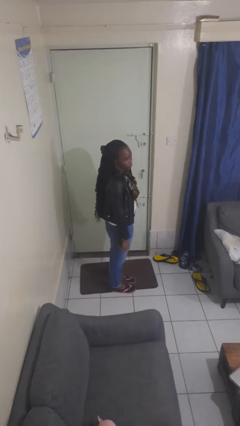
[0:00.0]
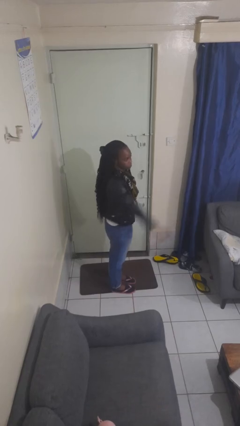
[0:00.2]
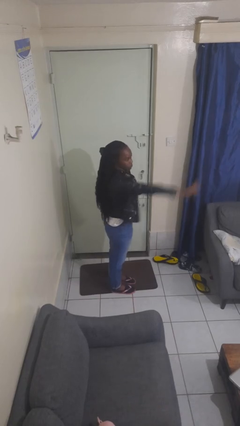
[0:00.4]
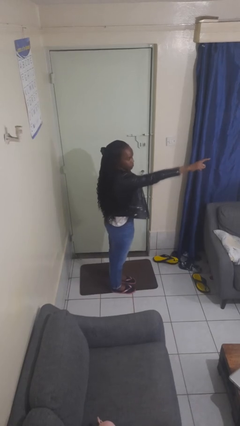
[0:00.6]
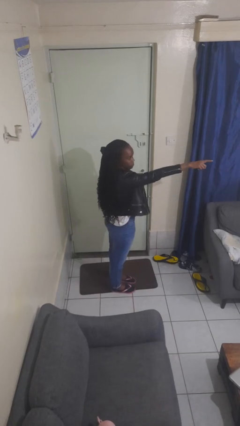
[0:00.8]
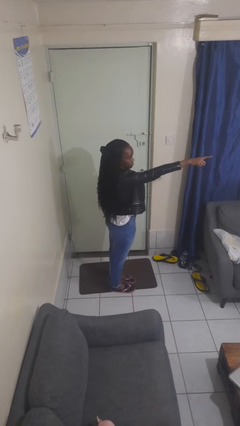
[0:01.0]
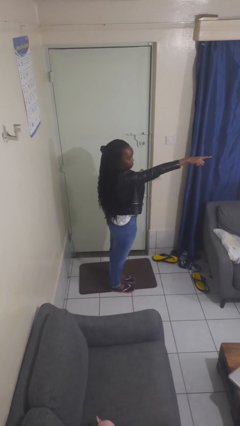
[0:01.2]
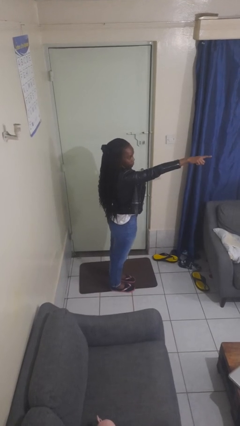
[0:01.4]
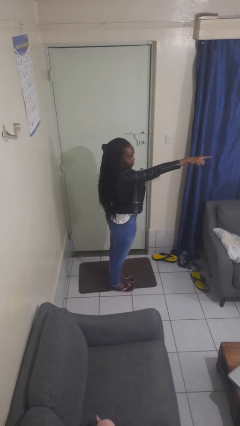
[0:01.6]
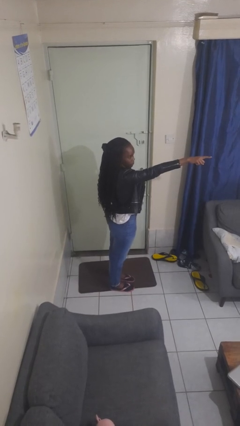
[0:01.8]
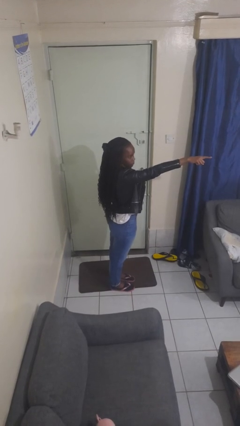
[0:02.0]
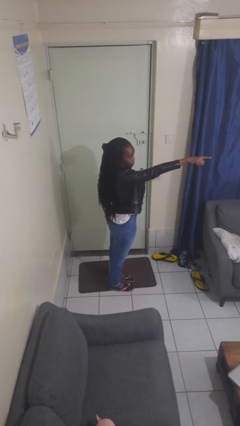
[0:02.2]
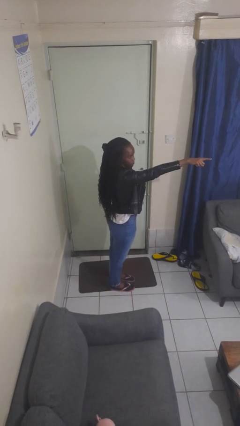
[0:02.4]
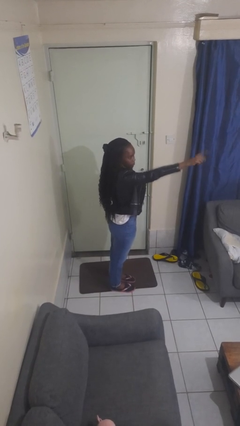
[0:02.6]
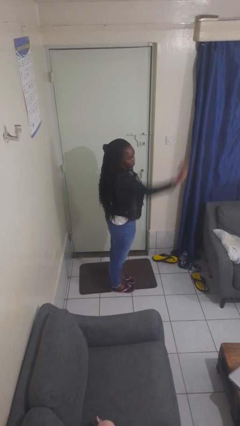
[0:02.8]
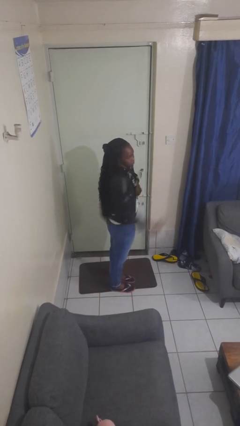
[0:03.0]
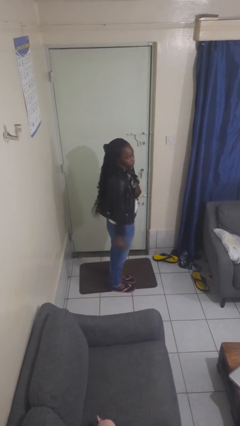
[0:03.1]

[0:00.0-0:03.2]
person points at person

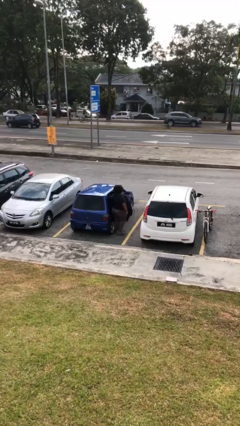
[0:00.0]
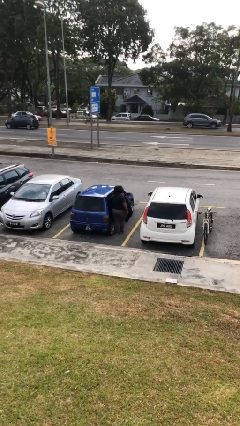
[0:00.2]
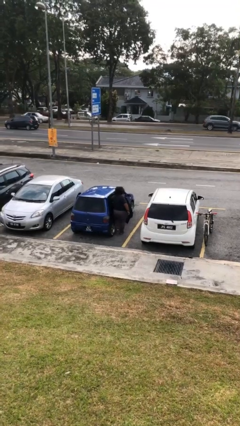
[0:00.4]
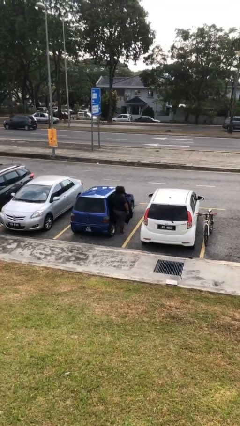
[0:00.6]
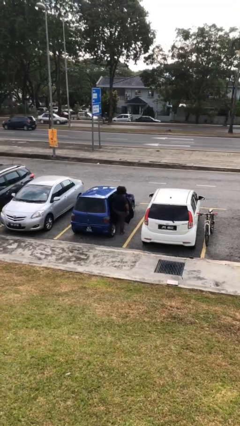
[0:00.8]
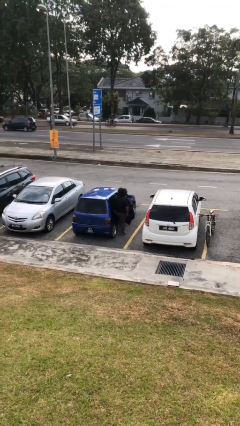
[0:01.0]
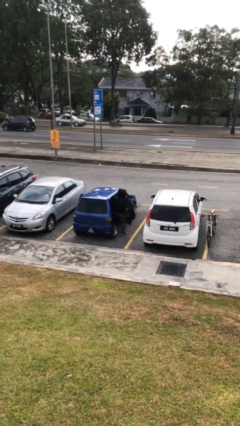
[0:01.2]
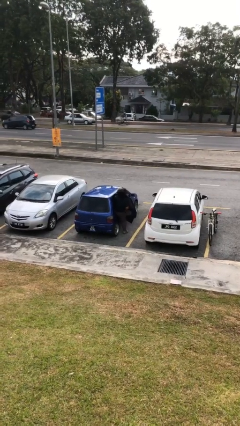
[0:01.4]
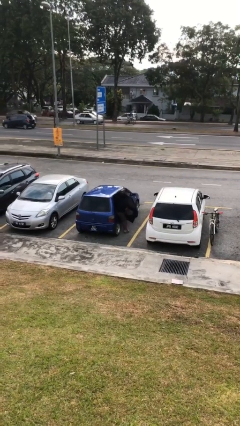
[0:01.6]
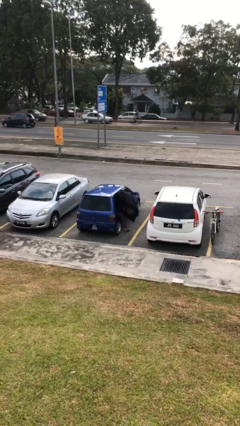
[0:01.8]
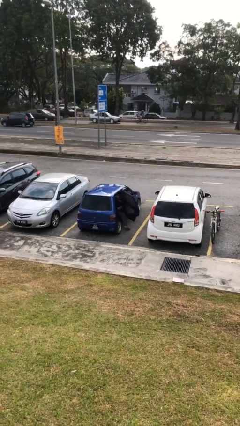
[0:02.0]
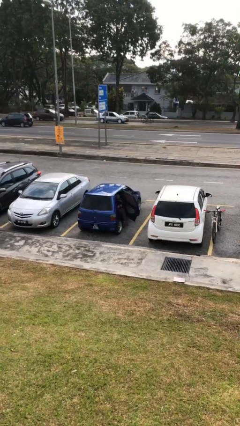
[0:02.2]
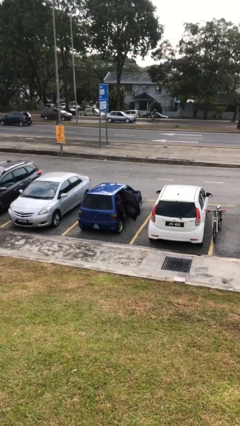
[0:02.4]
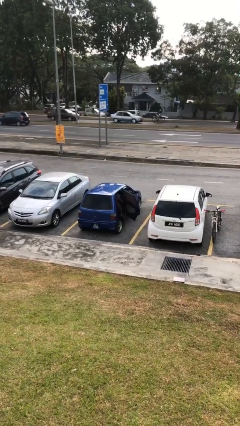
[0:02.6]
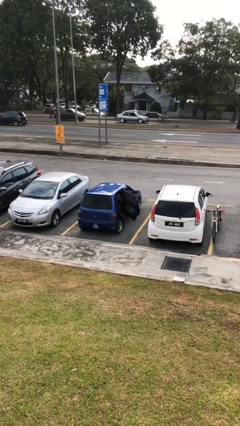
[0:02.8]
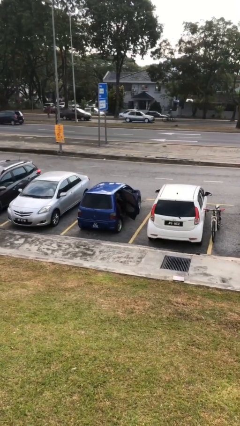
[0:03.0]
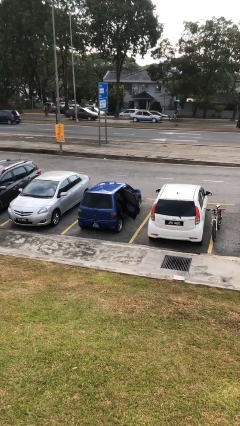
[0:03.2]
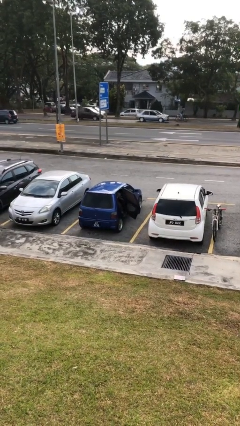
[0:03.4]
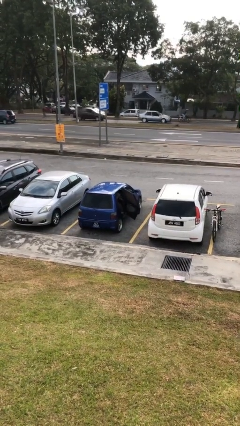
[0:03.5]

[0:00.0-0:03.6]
person enters car

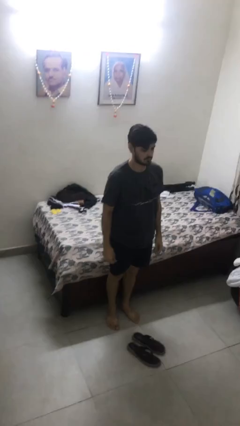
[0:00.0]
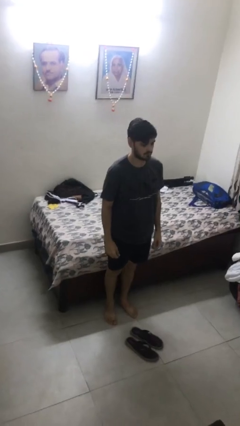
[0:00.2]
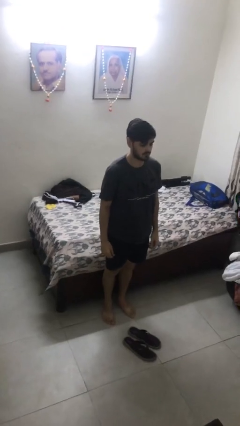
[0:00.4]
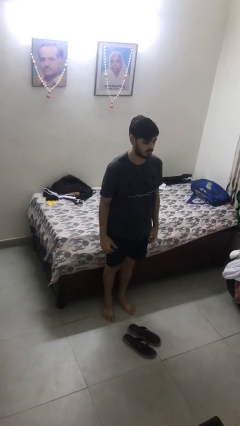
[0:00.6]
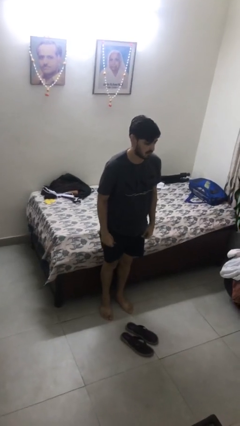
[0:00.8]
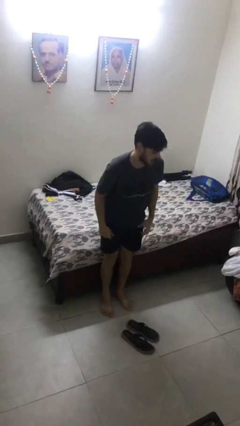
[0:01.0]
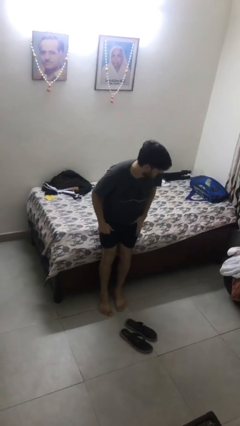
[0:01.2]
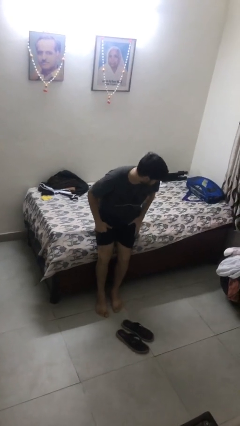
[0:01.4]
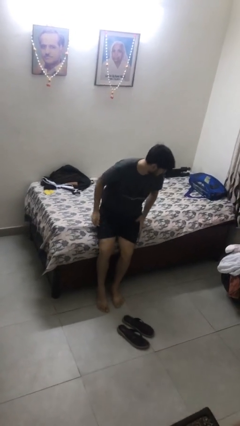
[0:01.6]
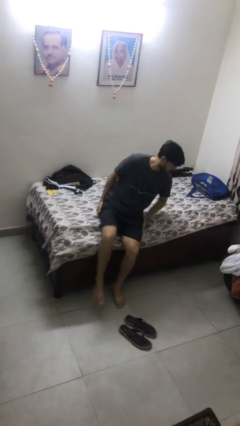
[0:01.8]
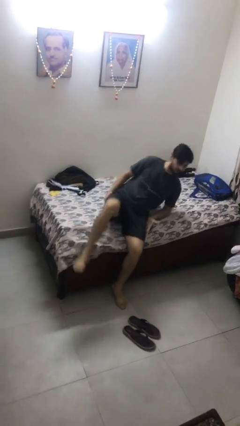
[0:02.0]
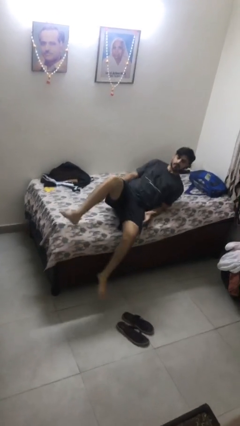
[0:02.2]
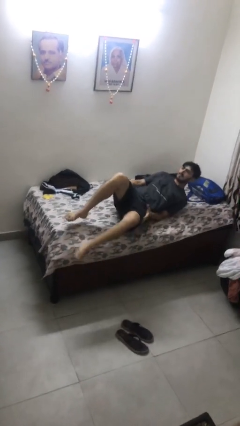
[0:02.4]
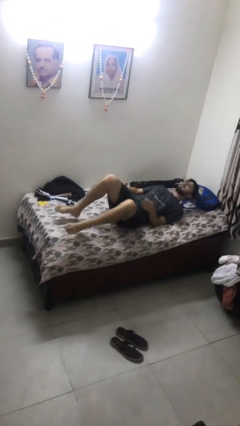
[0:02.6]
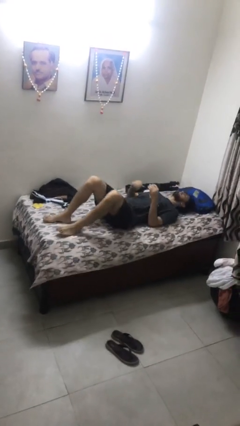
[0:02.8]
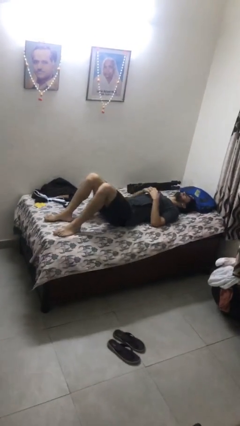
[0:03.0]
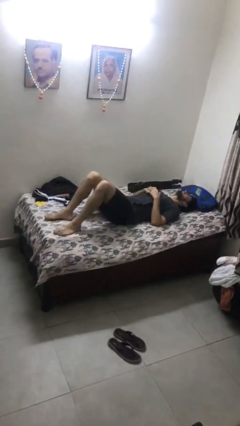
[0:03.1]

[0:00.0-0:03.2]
person lies down on bed

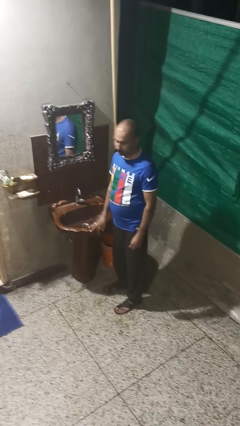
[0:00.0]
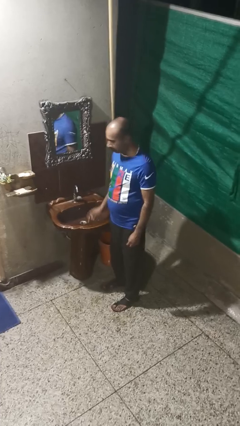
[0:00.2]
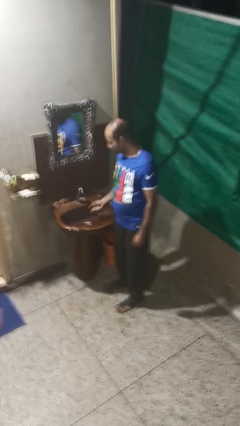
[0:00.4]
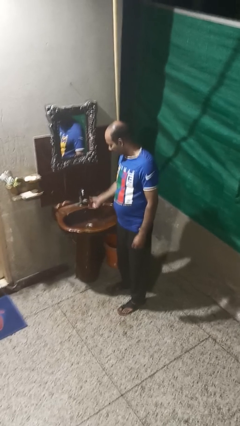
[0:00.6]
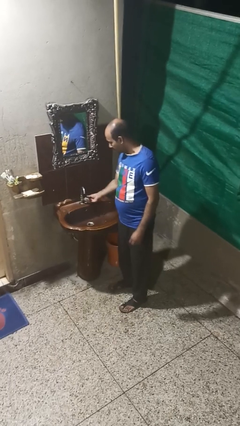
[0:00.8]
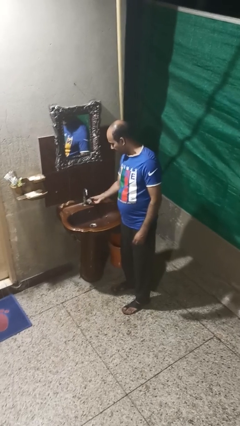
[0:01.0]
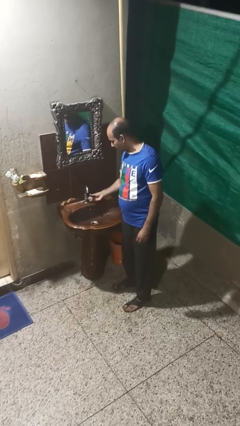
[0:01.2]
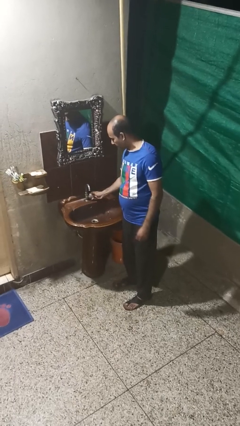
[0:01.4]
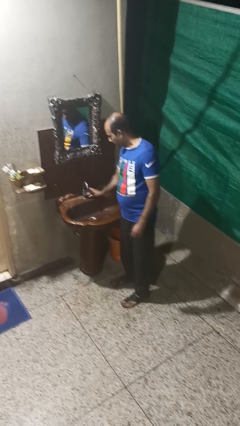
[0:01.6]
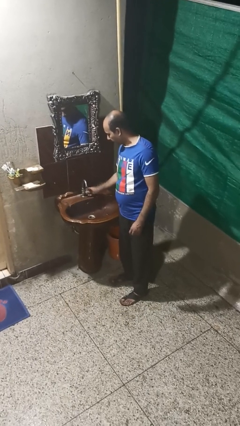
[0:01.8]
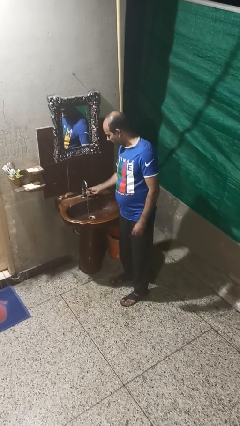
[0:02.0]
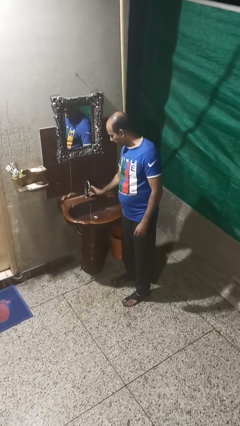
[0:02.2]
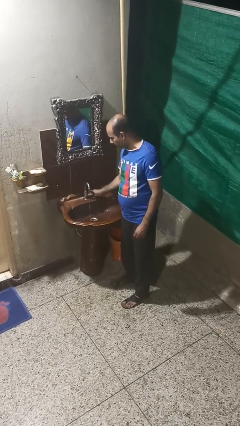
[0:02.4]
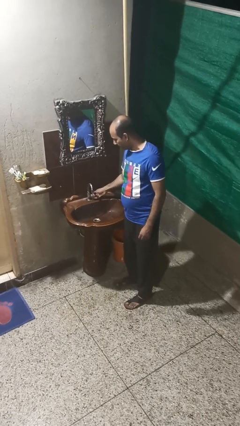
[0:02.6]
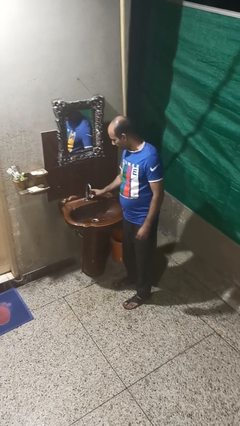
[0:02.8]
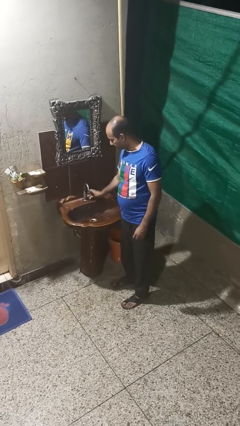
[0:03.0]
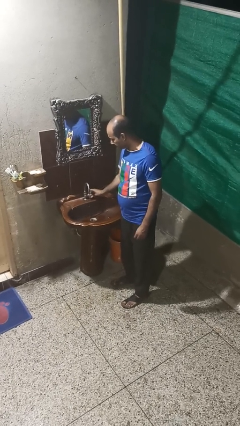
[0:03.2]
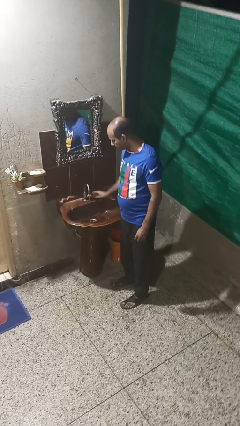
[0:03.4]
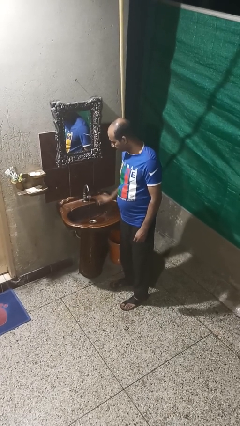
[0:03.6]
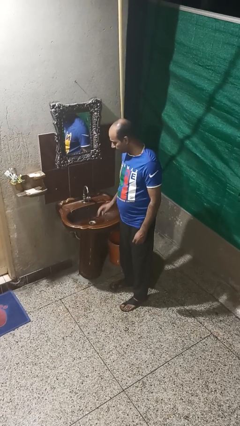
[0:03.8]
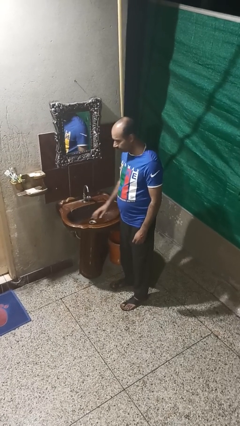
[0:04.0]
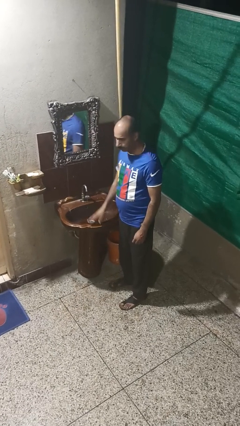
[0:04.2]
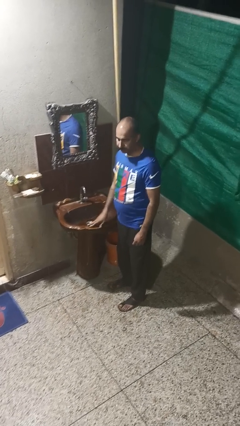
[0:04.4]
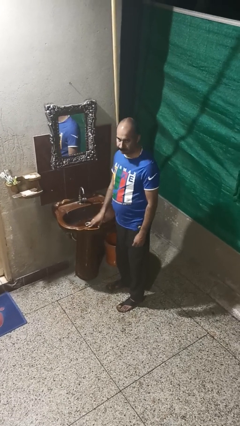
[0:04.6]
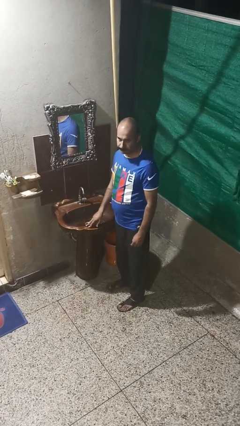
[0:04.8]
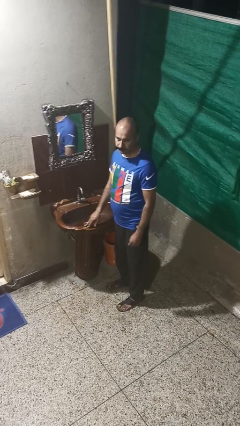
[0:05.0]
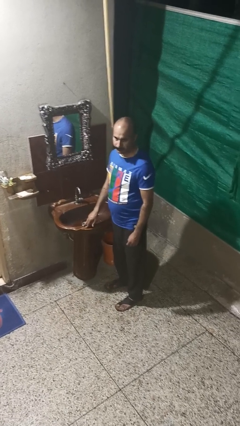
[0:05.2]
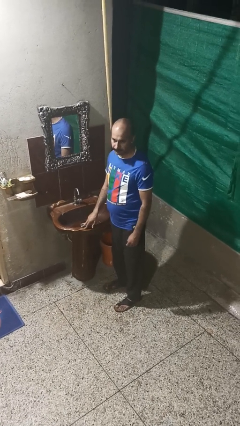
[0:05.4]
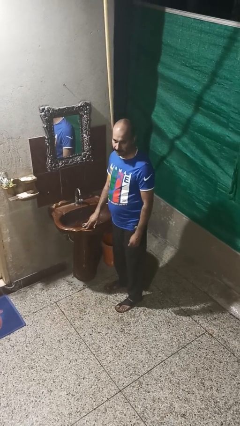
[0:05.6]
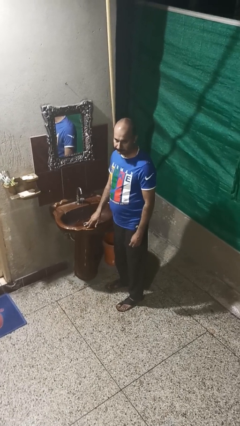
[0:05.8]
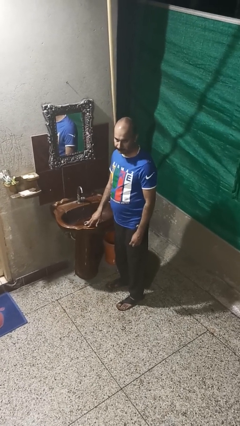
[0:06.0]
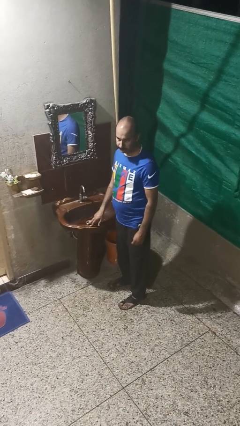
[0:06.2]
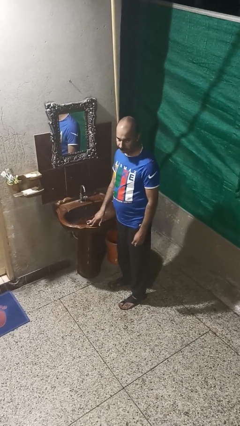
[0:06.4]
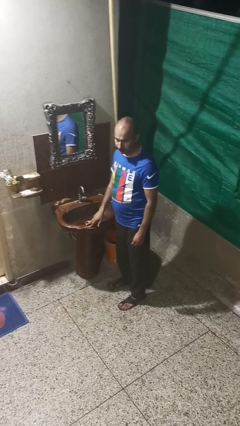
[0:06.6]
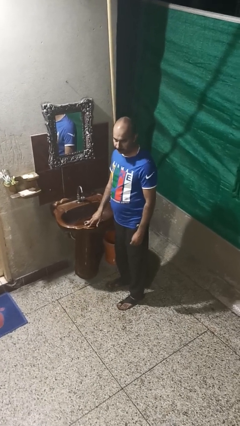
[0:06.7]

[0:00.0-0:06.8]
person turns on faucet

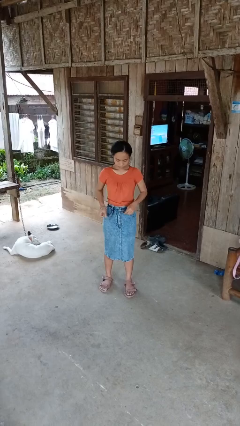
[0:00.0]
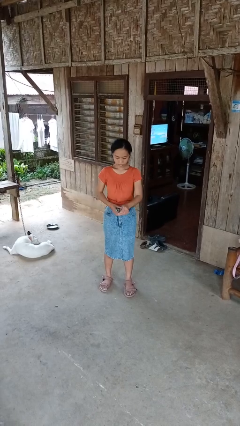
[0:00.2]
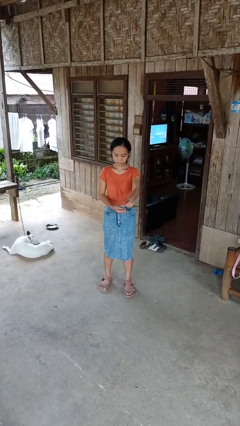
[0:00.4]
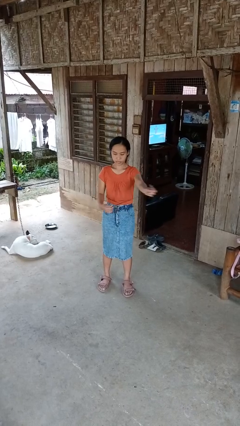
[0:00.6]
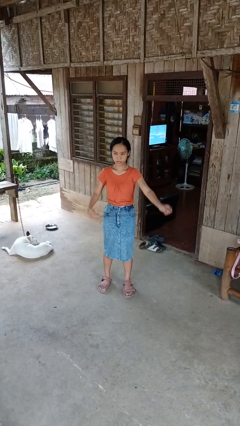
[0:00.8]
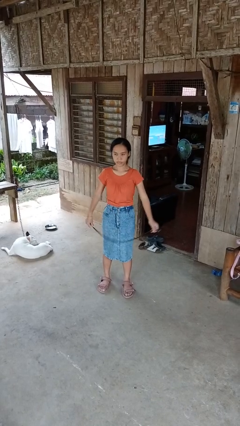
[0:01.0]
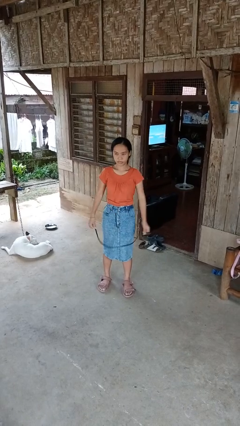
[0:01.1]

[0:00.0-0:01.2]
person takes off belt
